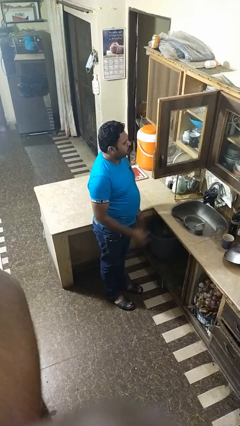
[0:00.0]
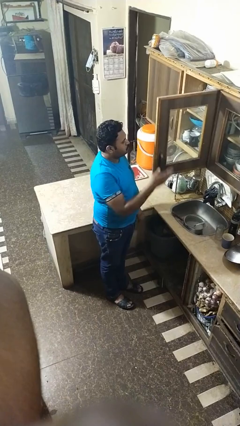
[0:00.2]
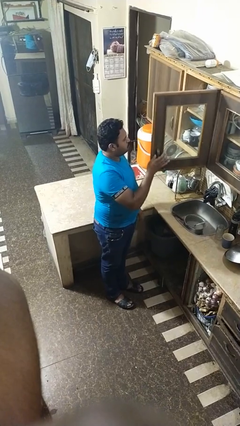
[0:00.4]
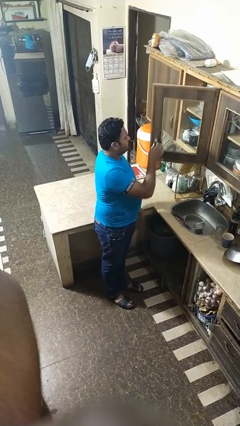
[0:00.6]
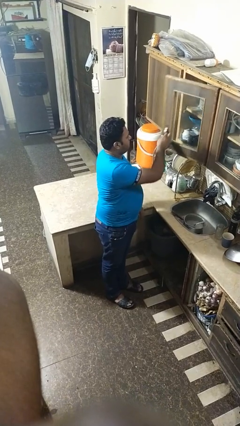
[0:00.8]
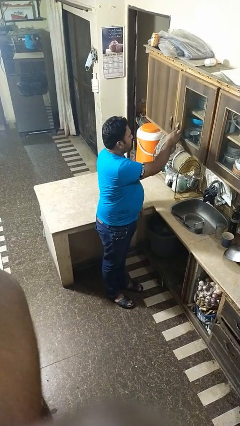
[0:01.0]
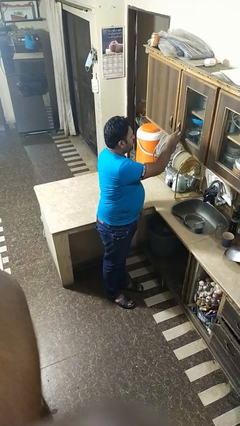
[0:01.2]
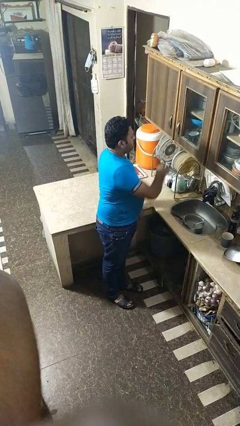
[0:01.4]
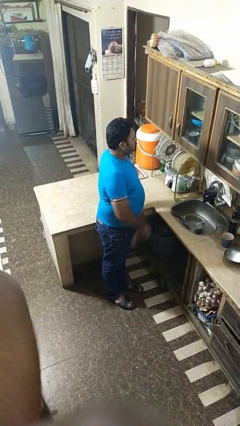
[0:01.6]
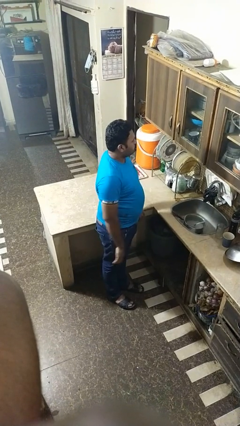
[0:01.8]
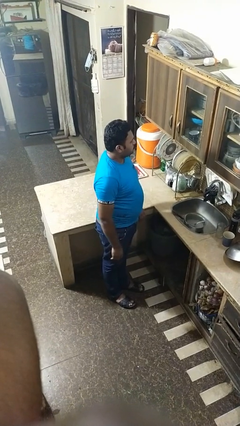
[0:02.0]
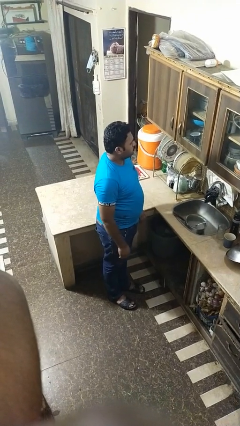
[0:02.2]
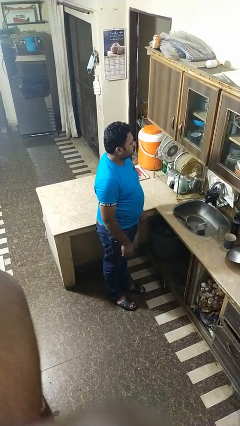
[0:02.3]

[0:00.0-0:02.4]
person closes cabinet

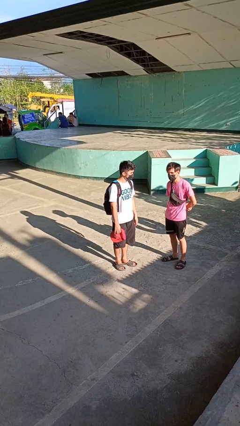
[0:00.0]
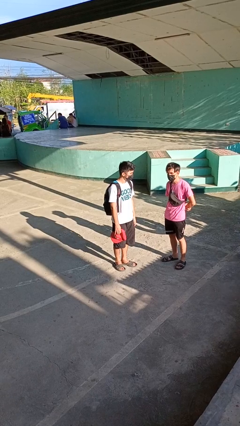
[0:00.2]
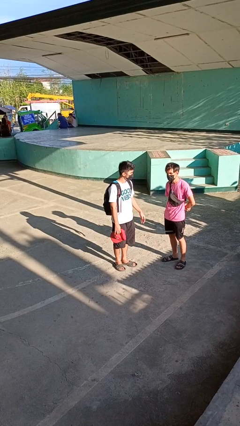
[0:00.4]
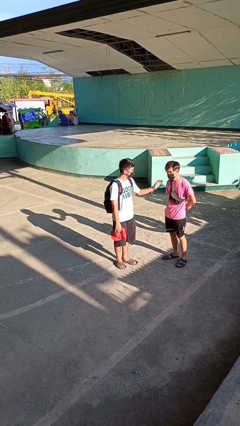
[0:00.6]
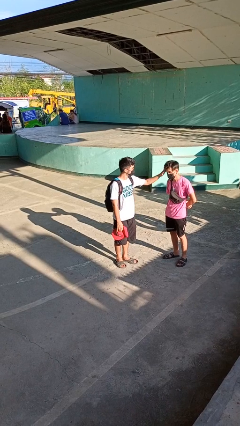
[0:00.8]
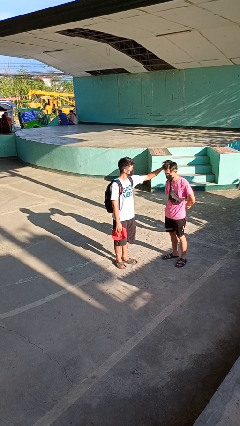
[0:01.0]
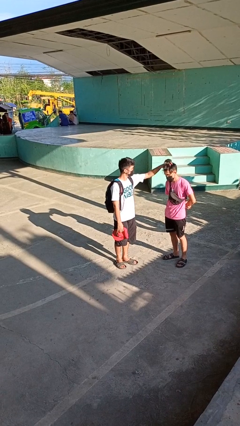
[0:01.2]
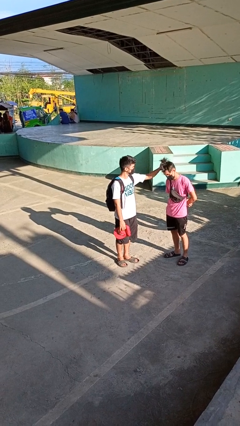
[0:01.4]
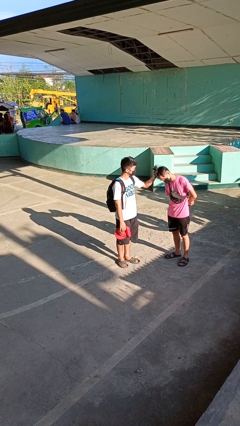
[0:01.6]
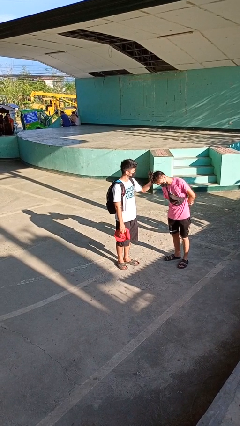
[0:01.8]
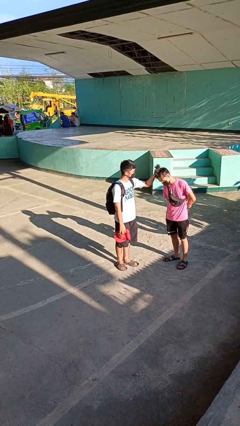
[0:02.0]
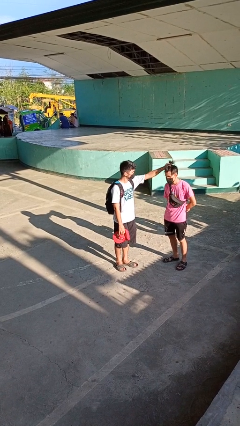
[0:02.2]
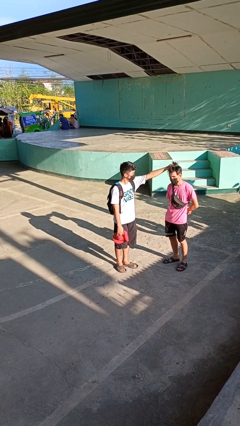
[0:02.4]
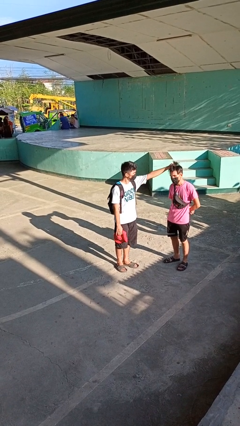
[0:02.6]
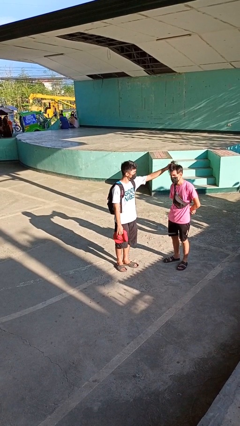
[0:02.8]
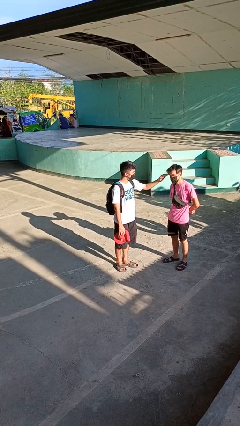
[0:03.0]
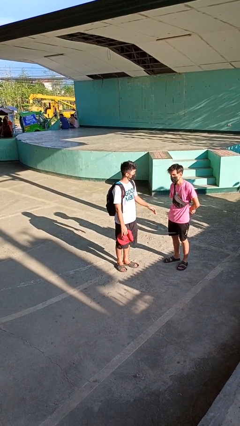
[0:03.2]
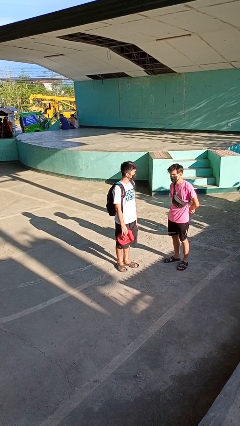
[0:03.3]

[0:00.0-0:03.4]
person grabs person by hair

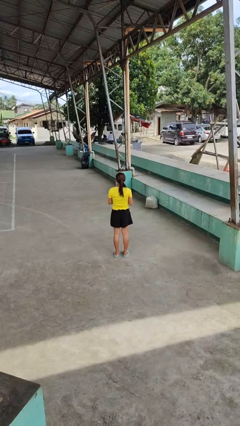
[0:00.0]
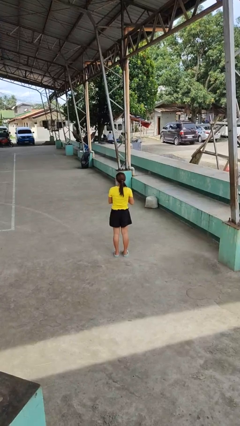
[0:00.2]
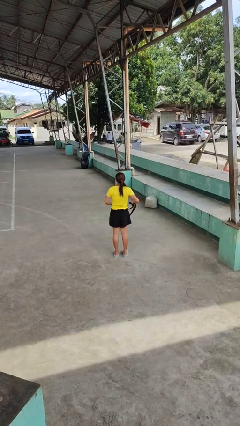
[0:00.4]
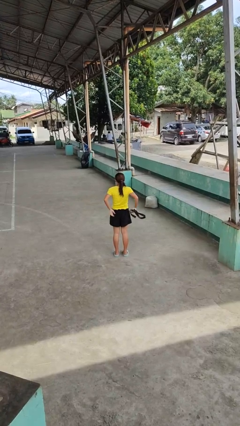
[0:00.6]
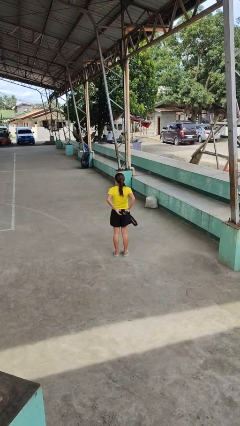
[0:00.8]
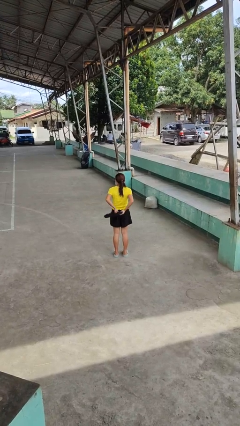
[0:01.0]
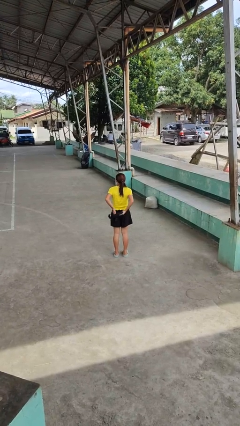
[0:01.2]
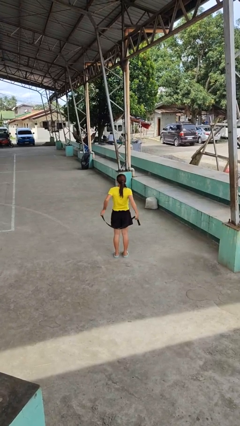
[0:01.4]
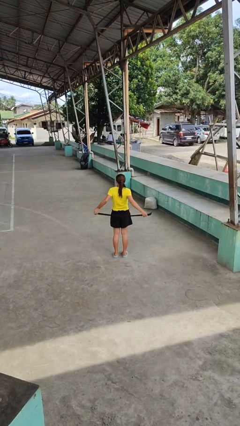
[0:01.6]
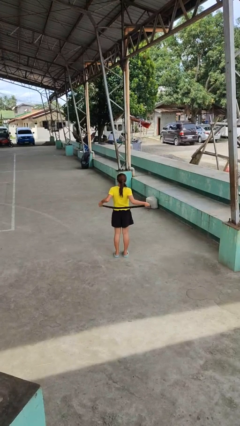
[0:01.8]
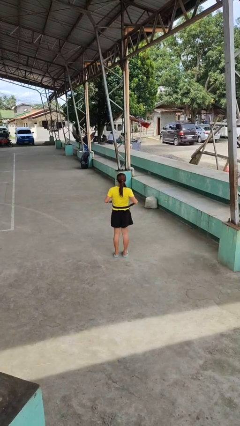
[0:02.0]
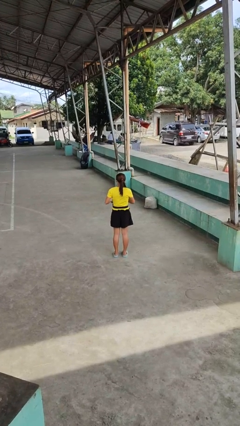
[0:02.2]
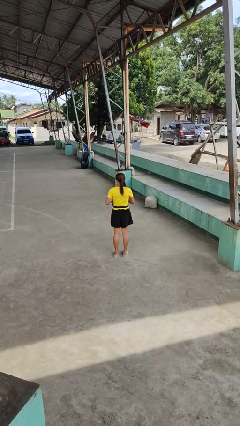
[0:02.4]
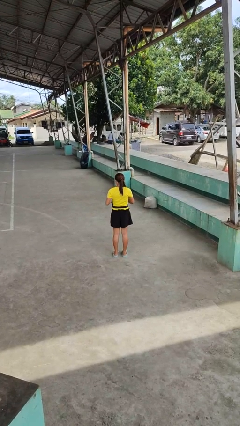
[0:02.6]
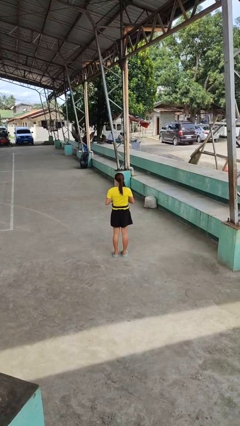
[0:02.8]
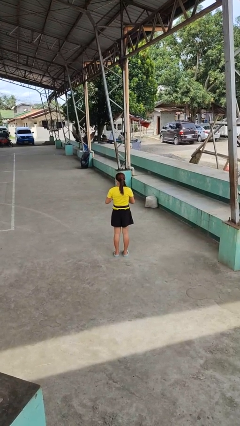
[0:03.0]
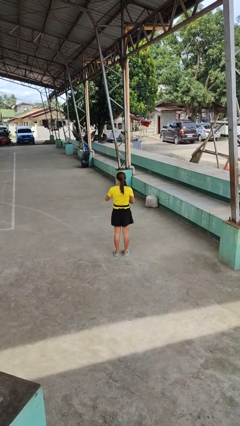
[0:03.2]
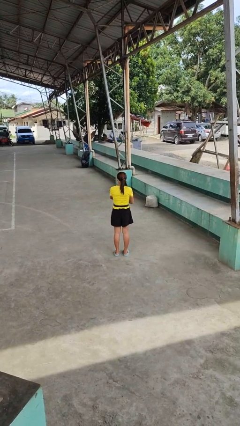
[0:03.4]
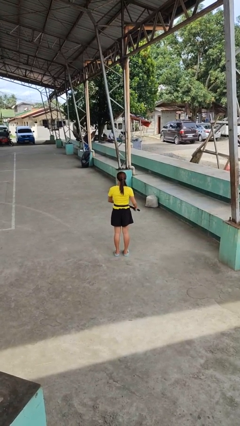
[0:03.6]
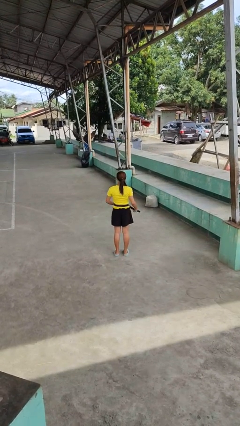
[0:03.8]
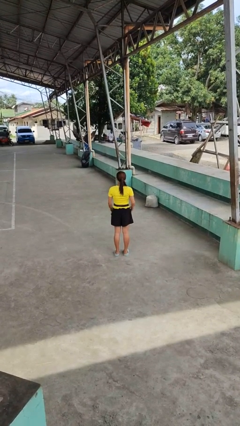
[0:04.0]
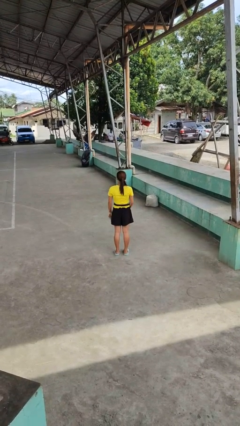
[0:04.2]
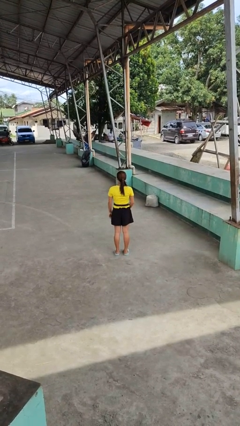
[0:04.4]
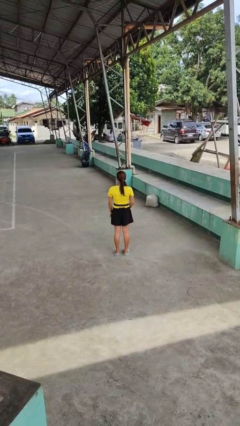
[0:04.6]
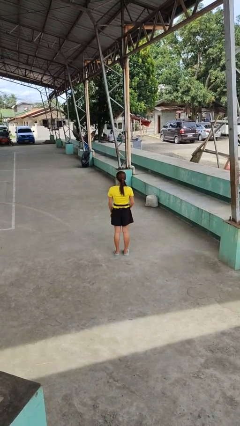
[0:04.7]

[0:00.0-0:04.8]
person puts on belt

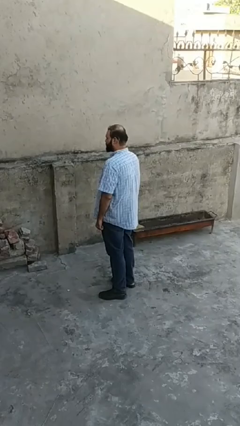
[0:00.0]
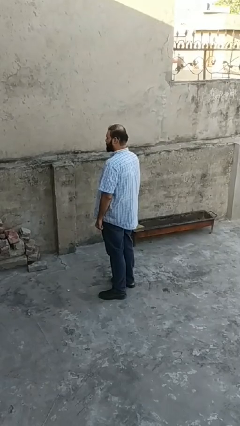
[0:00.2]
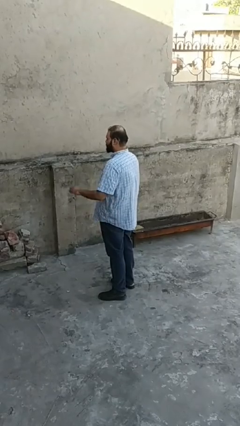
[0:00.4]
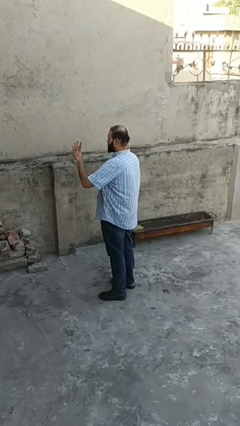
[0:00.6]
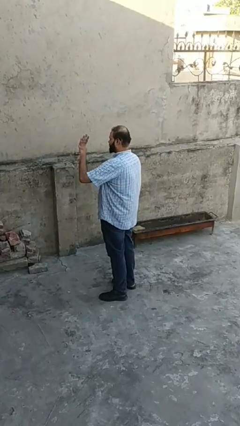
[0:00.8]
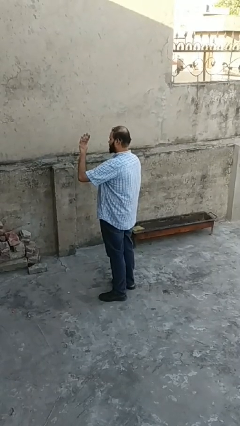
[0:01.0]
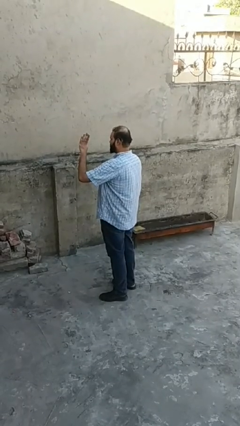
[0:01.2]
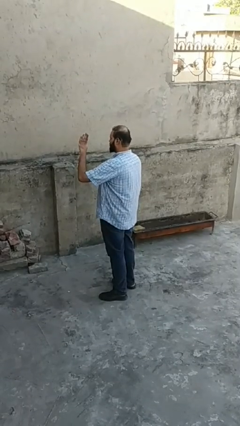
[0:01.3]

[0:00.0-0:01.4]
person gestures number four

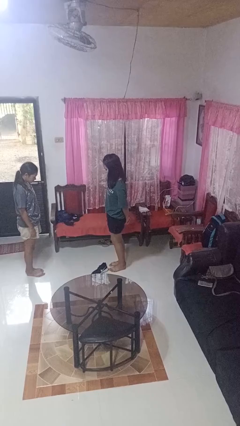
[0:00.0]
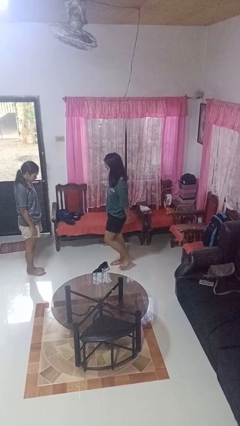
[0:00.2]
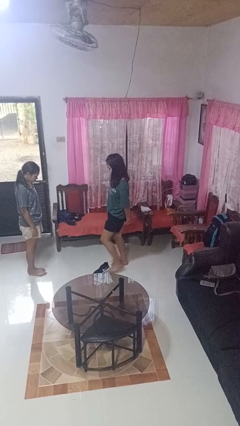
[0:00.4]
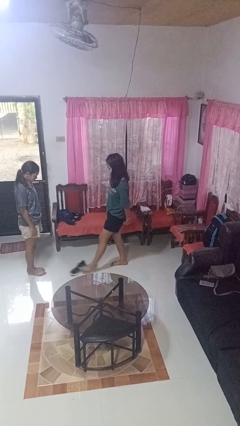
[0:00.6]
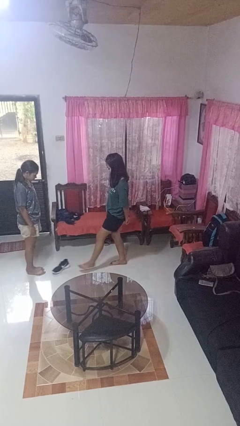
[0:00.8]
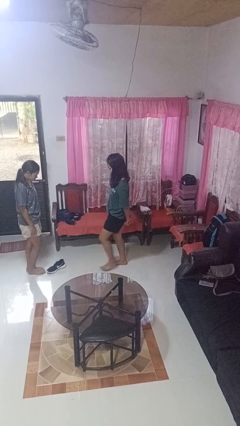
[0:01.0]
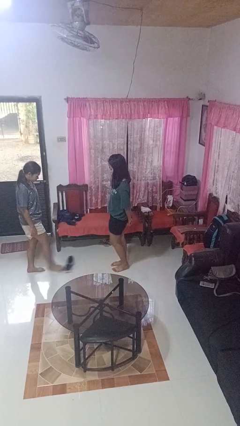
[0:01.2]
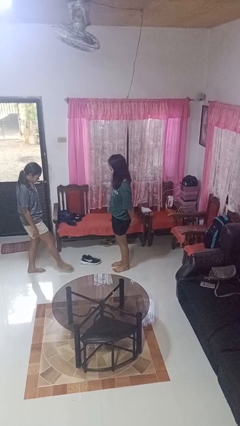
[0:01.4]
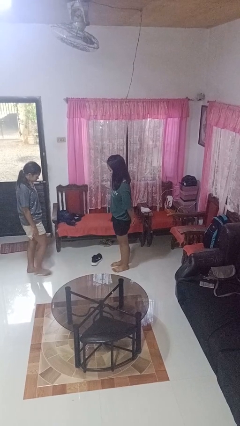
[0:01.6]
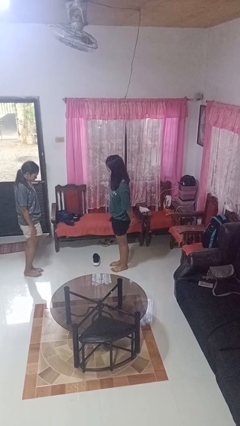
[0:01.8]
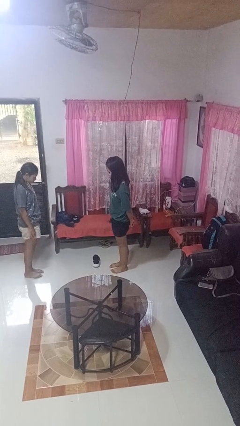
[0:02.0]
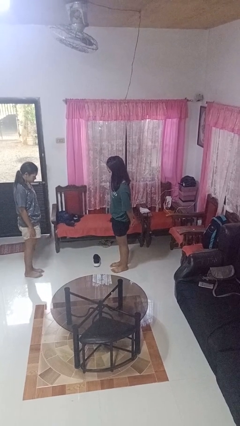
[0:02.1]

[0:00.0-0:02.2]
person kicks object to person

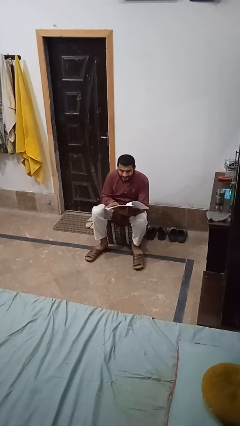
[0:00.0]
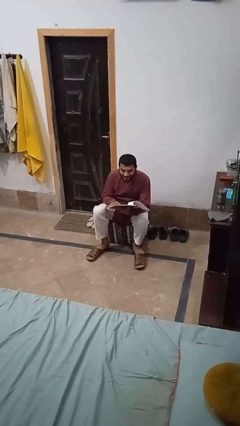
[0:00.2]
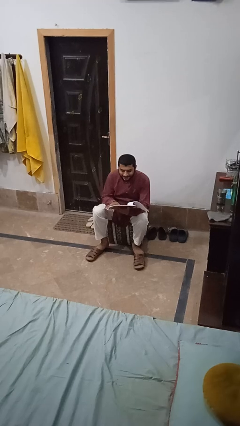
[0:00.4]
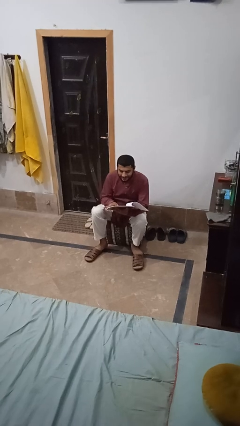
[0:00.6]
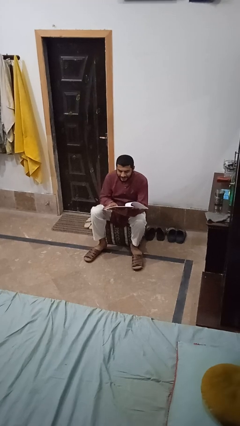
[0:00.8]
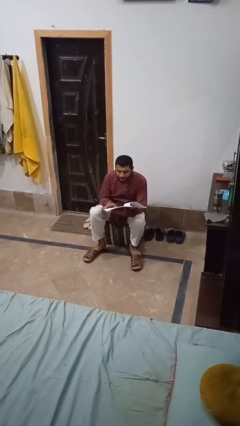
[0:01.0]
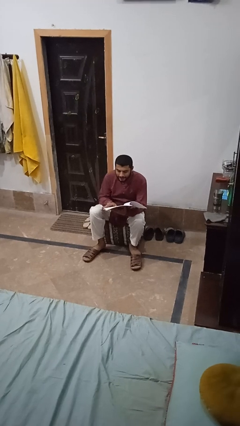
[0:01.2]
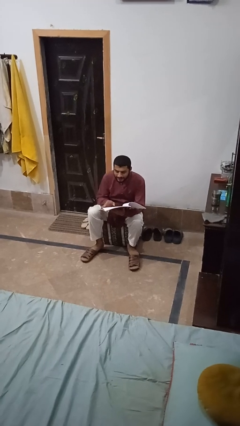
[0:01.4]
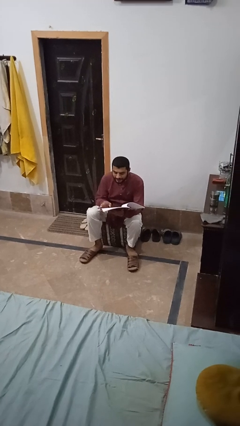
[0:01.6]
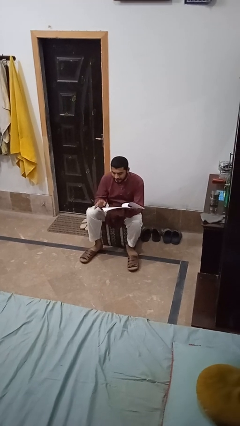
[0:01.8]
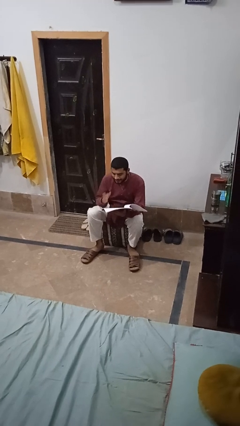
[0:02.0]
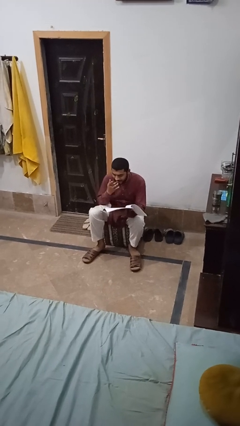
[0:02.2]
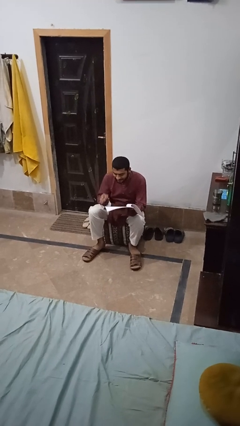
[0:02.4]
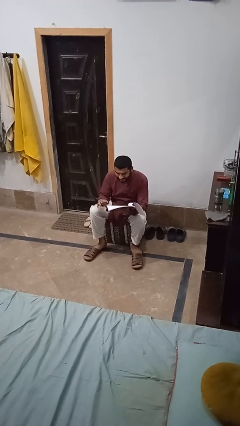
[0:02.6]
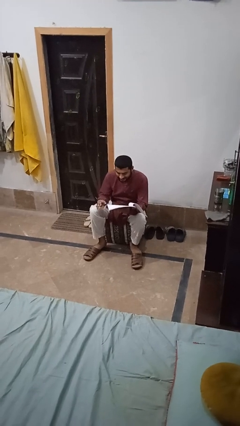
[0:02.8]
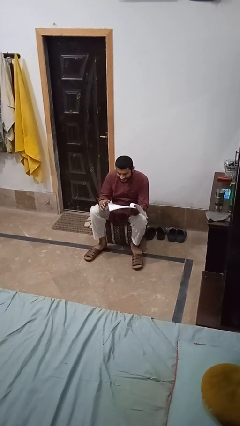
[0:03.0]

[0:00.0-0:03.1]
person stands up from floor
